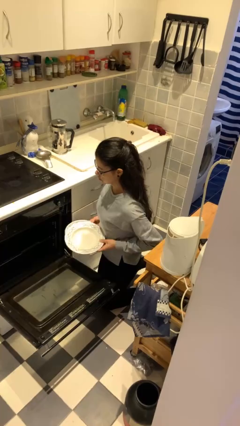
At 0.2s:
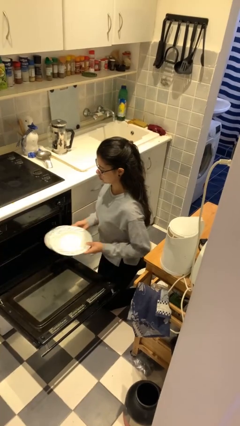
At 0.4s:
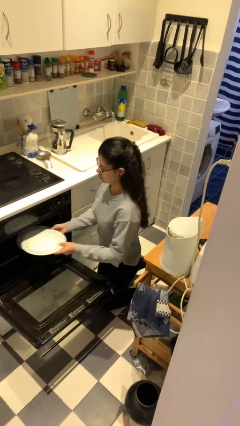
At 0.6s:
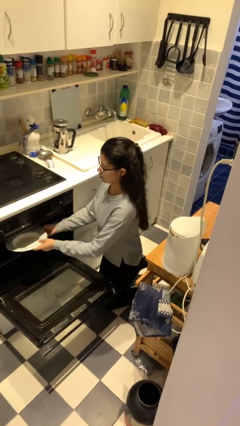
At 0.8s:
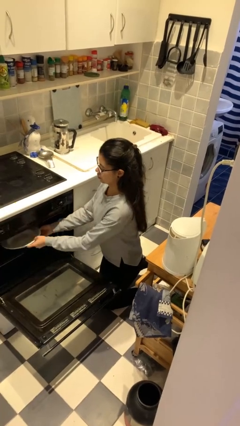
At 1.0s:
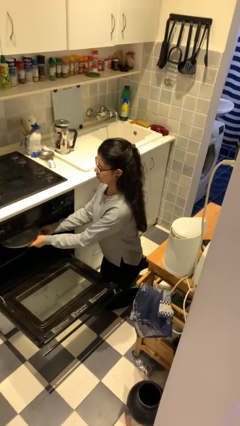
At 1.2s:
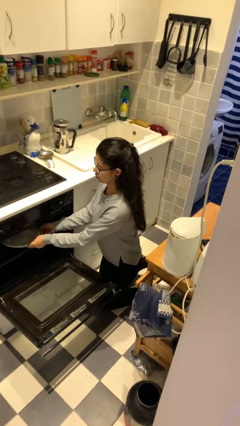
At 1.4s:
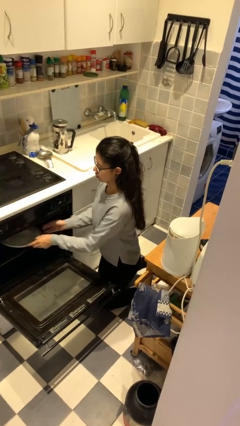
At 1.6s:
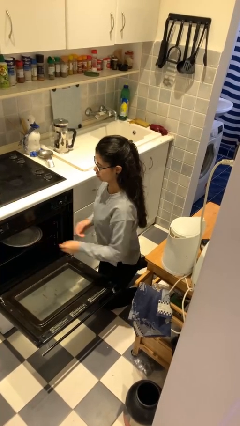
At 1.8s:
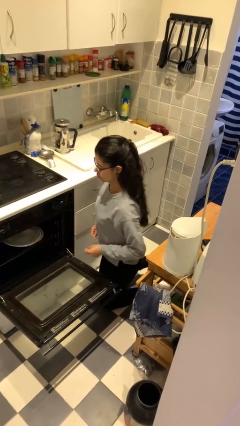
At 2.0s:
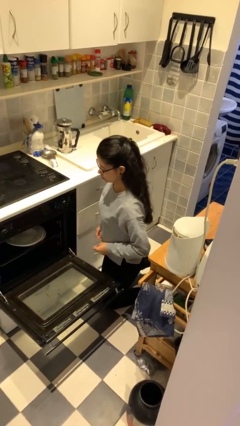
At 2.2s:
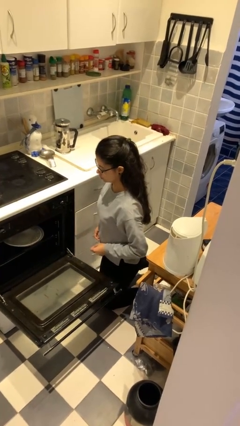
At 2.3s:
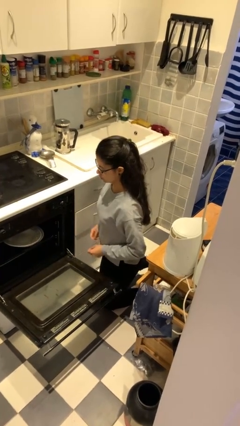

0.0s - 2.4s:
person loads dishwasher

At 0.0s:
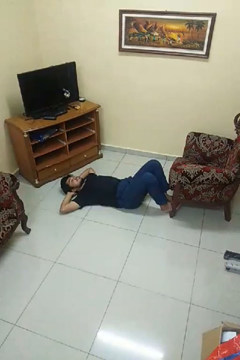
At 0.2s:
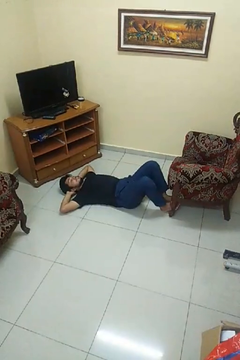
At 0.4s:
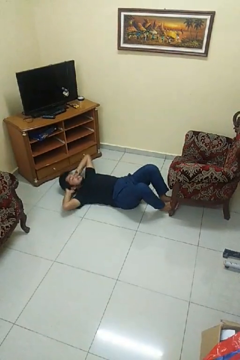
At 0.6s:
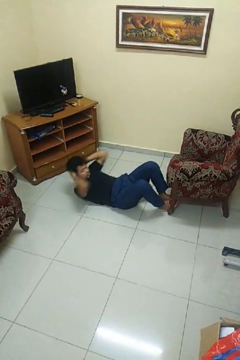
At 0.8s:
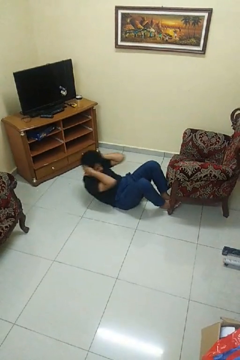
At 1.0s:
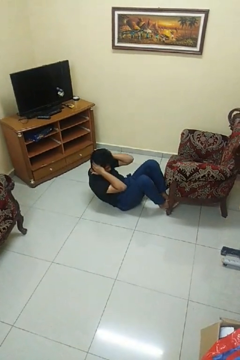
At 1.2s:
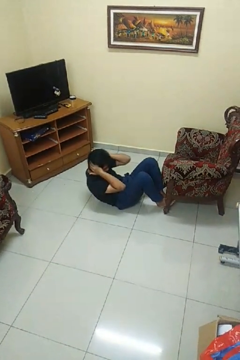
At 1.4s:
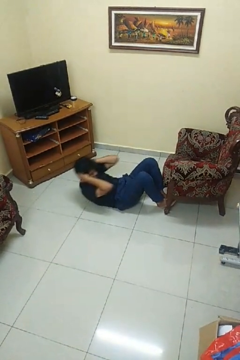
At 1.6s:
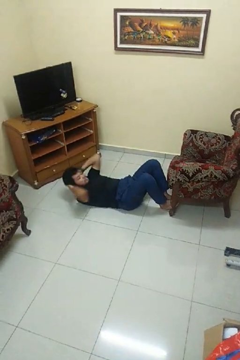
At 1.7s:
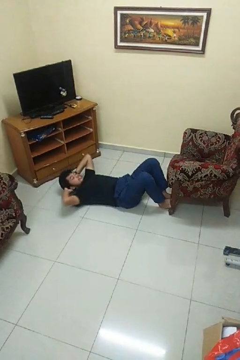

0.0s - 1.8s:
person exercises with situp

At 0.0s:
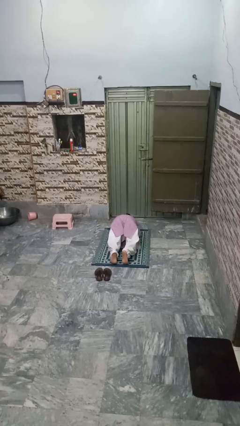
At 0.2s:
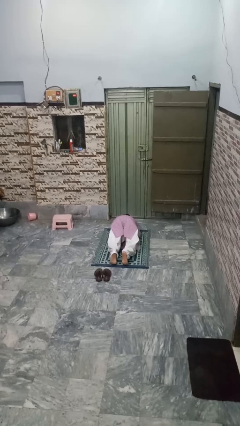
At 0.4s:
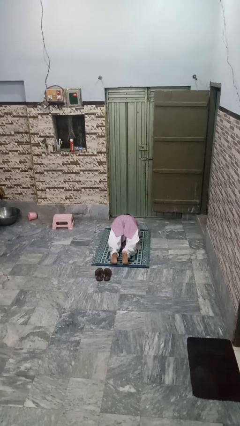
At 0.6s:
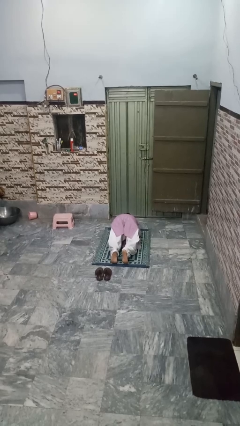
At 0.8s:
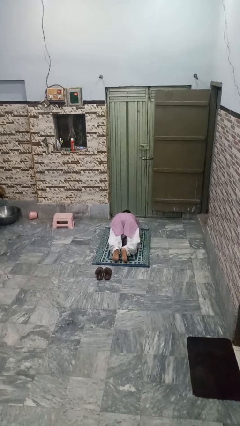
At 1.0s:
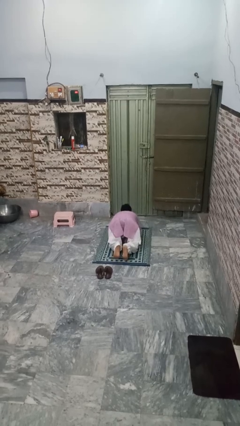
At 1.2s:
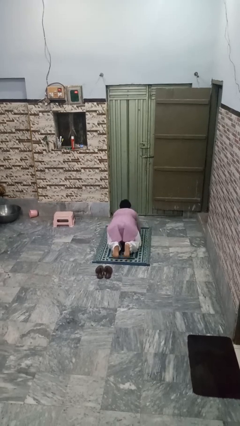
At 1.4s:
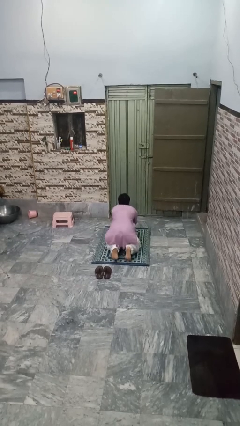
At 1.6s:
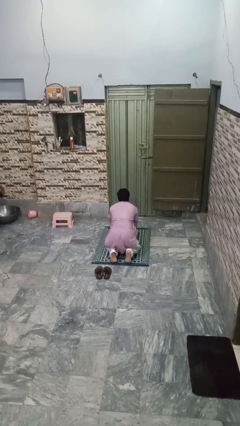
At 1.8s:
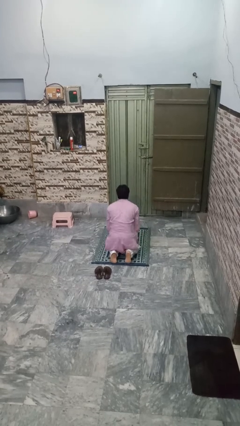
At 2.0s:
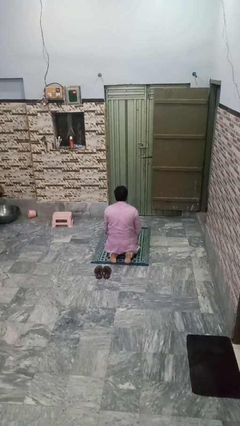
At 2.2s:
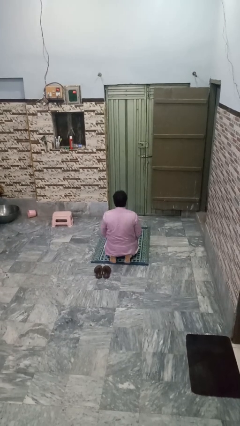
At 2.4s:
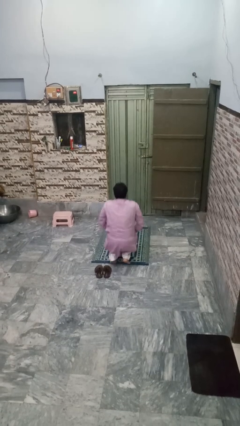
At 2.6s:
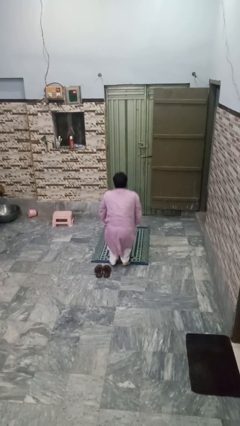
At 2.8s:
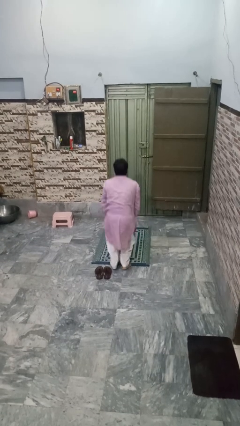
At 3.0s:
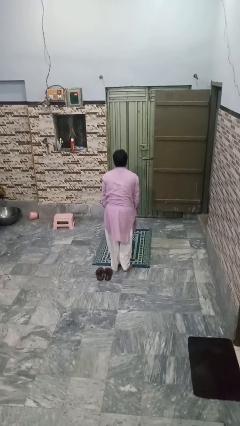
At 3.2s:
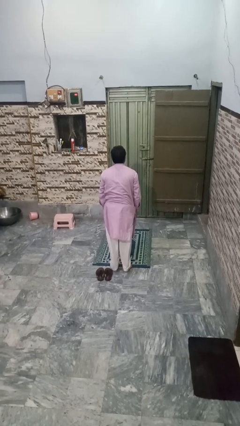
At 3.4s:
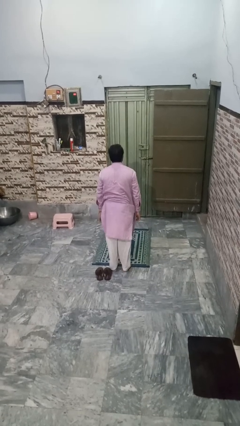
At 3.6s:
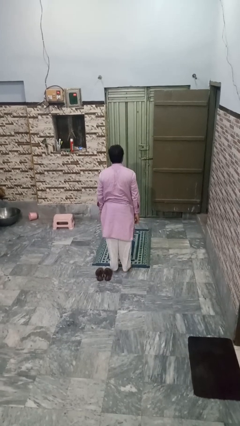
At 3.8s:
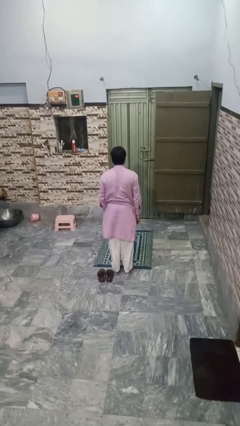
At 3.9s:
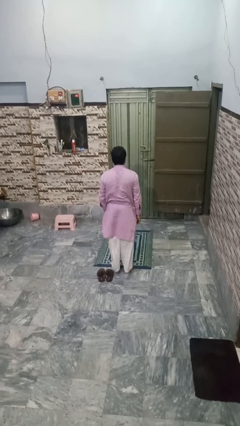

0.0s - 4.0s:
person stands up from floor

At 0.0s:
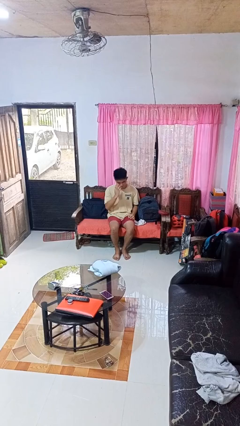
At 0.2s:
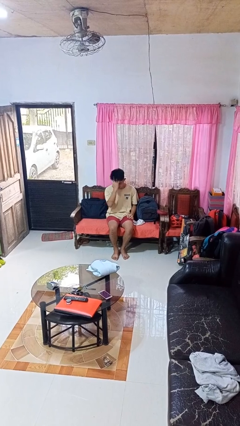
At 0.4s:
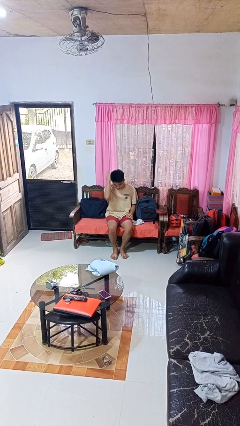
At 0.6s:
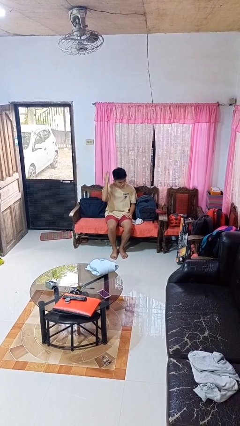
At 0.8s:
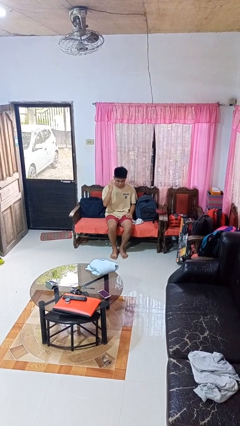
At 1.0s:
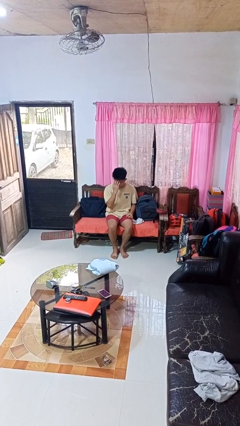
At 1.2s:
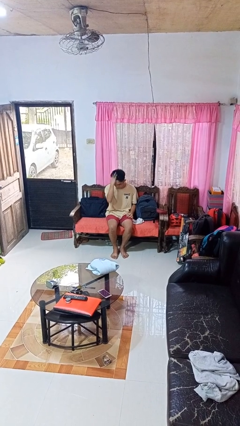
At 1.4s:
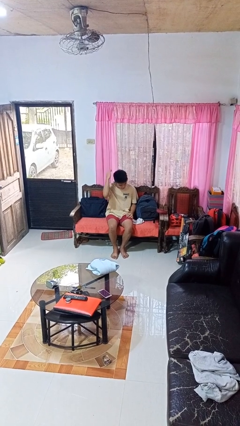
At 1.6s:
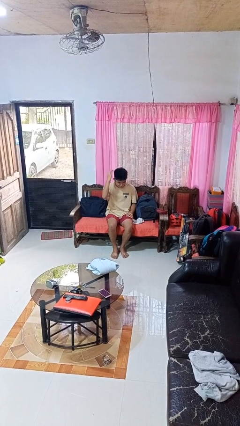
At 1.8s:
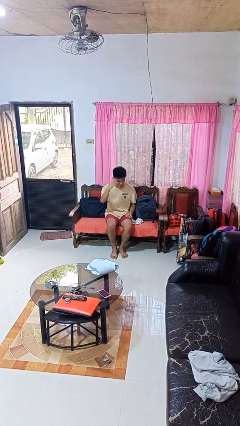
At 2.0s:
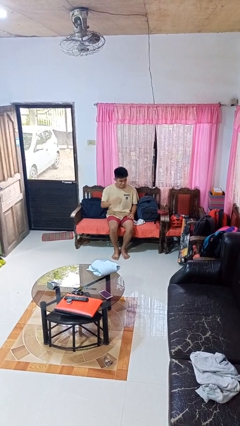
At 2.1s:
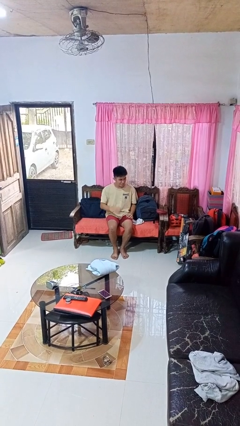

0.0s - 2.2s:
person strokes hair

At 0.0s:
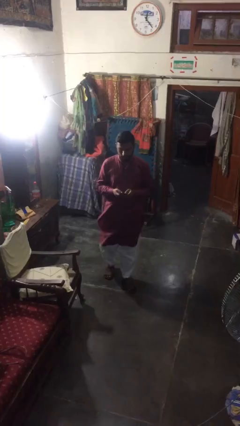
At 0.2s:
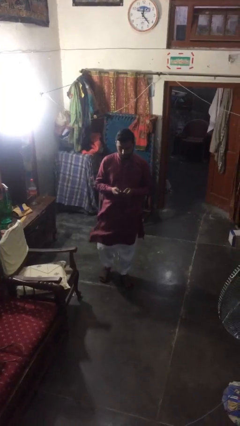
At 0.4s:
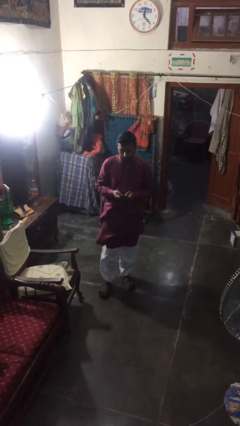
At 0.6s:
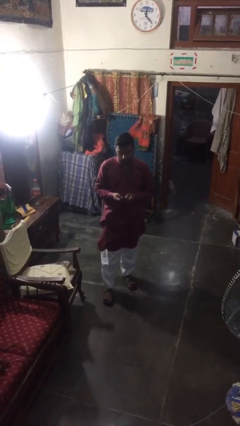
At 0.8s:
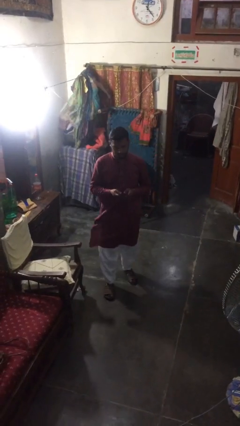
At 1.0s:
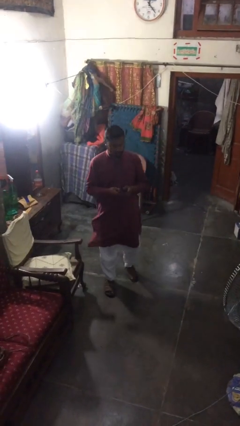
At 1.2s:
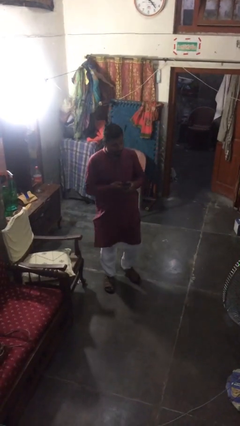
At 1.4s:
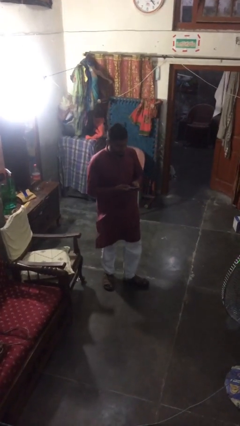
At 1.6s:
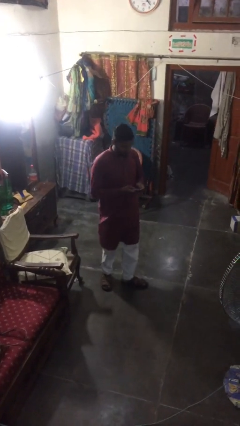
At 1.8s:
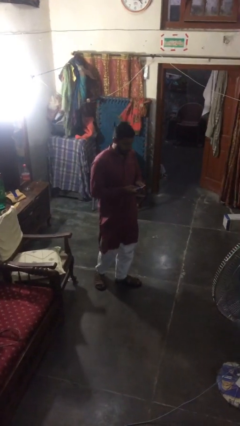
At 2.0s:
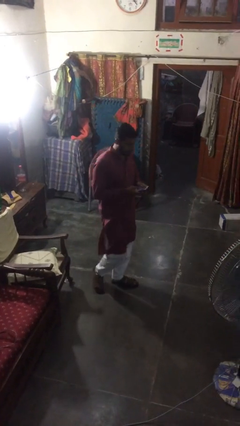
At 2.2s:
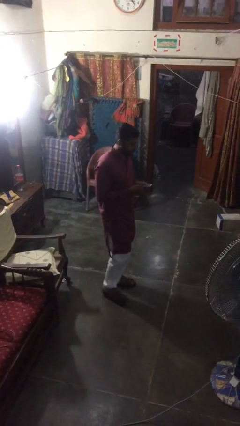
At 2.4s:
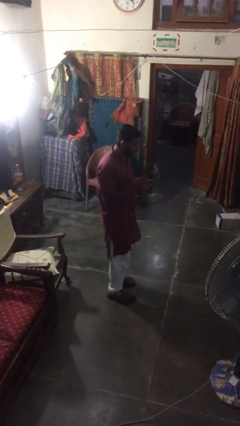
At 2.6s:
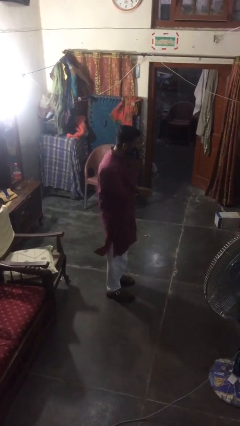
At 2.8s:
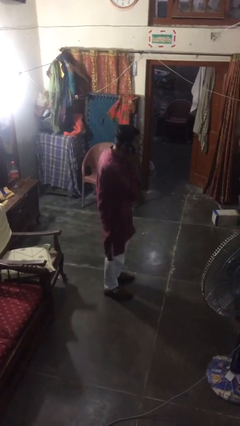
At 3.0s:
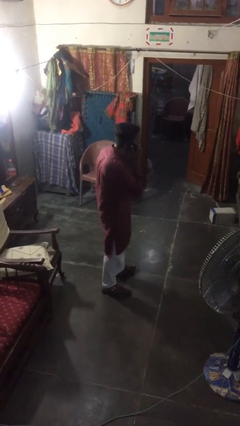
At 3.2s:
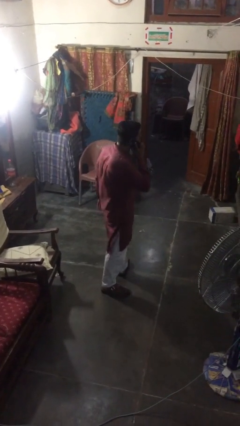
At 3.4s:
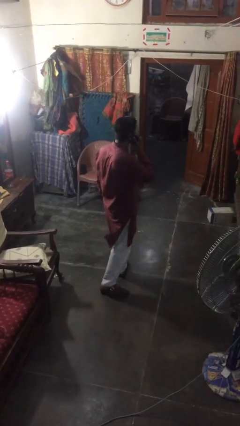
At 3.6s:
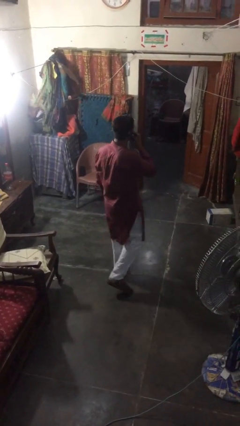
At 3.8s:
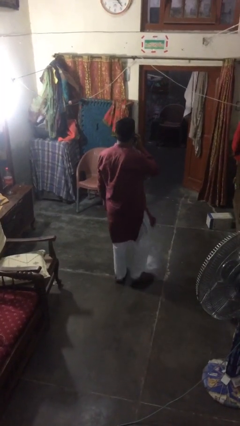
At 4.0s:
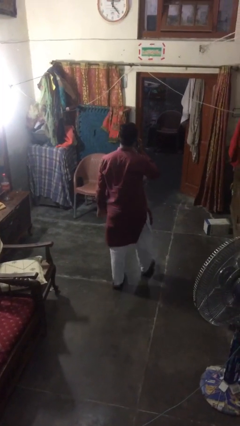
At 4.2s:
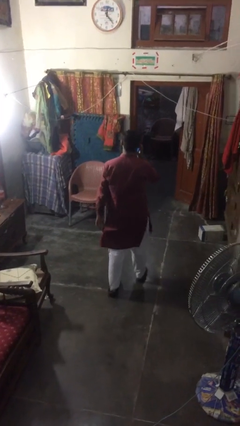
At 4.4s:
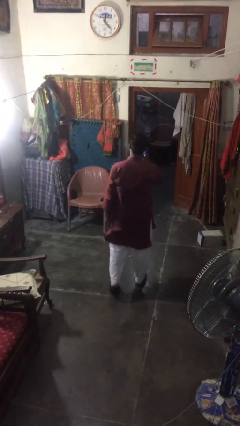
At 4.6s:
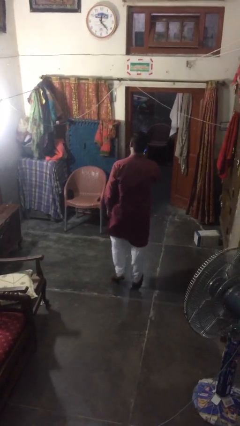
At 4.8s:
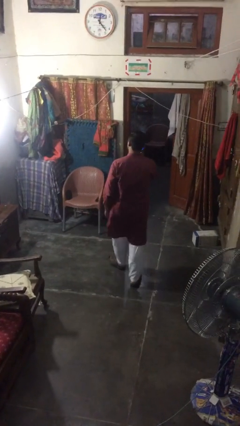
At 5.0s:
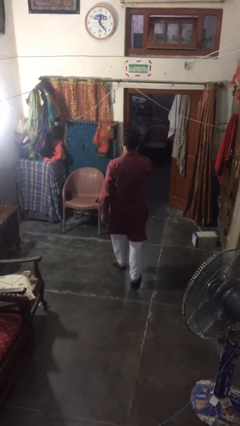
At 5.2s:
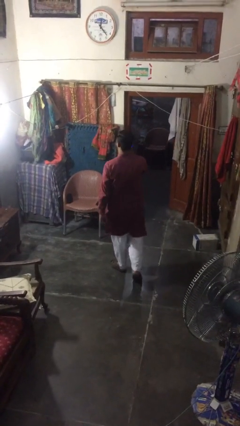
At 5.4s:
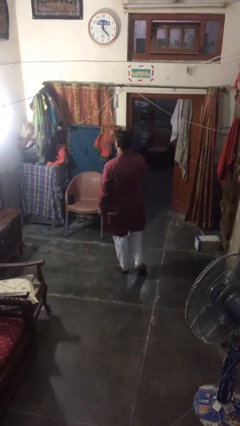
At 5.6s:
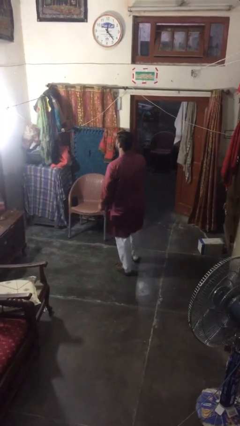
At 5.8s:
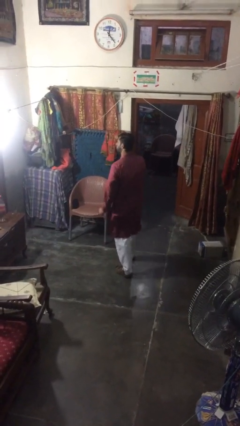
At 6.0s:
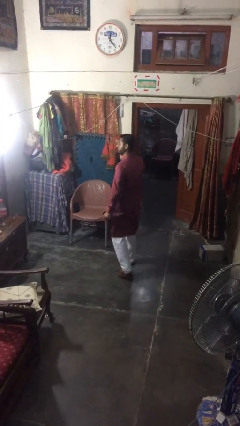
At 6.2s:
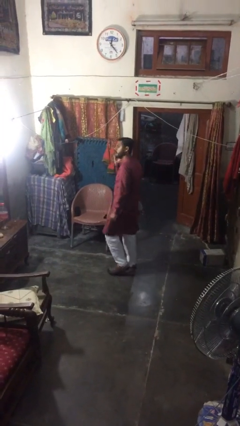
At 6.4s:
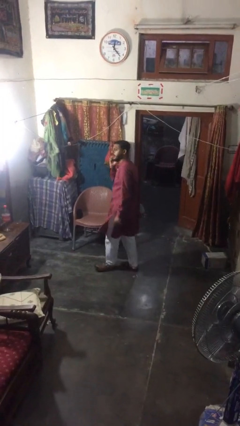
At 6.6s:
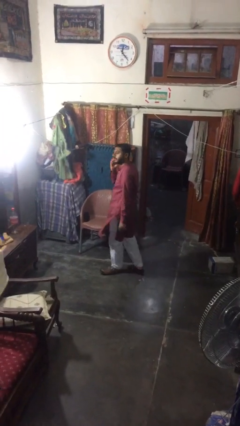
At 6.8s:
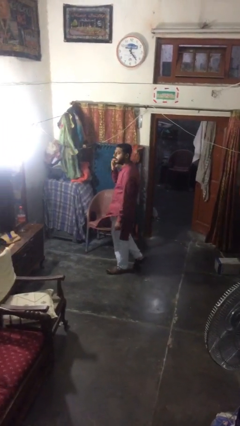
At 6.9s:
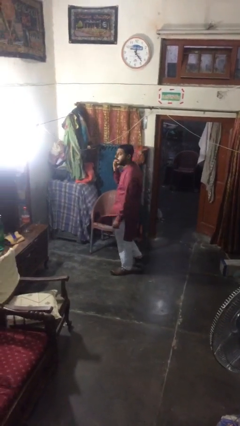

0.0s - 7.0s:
person talks on phone

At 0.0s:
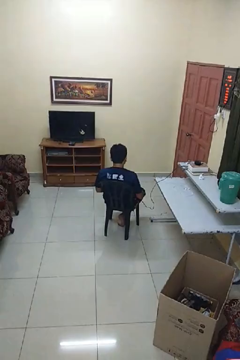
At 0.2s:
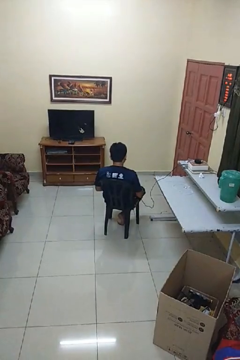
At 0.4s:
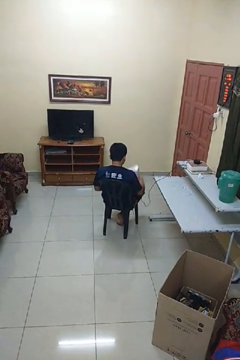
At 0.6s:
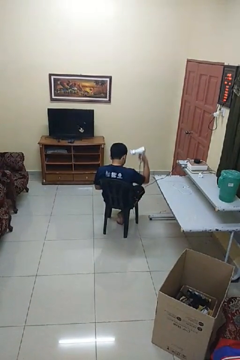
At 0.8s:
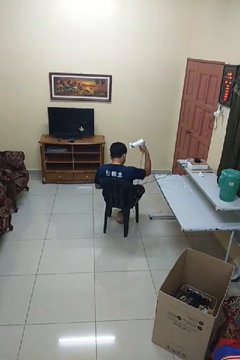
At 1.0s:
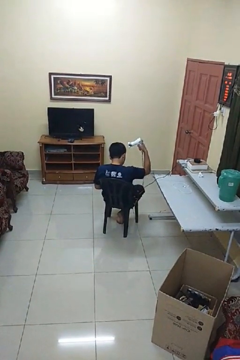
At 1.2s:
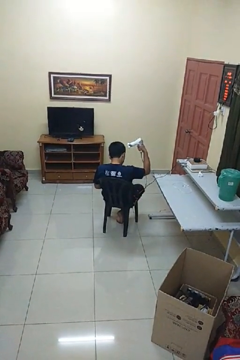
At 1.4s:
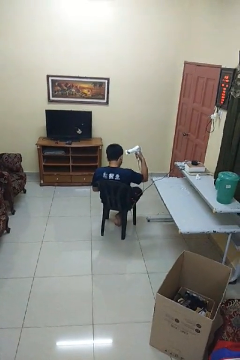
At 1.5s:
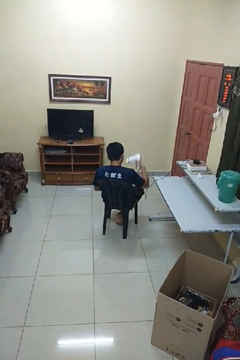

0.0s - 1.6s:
person dries hair with hairdryer
